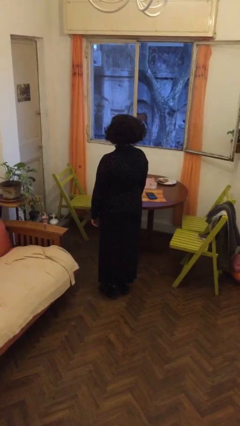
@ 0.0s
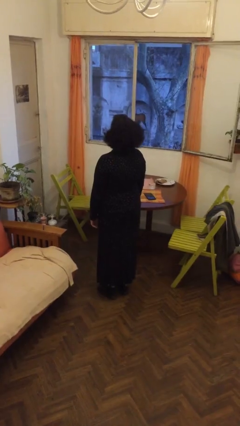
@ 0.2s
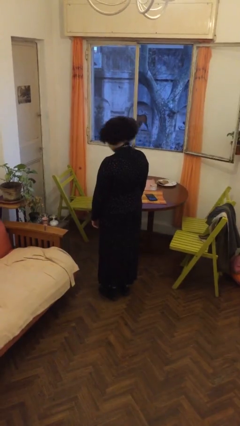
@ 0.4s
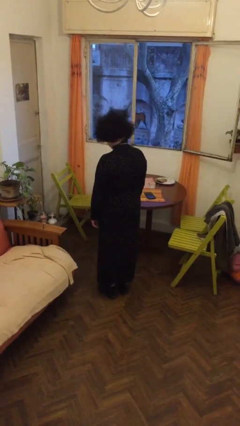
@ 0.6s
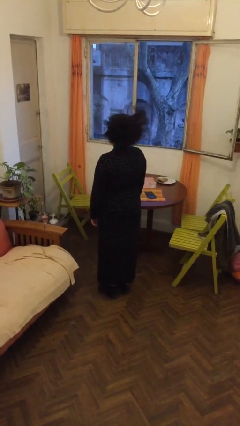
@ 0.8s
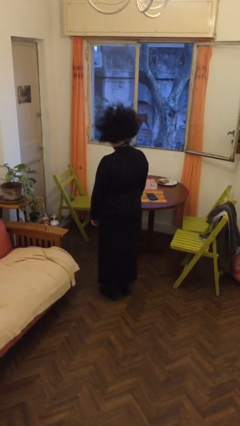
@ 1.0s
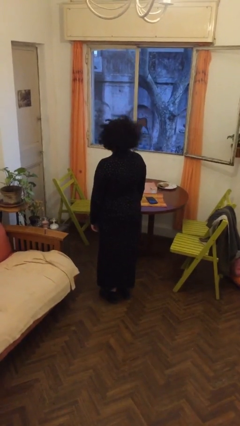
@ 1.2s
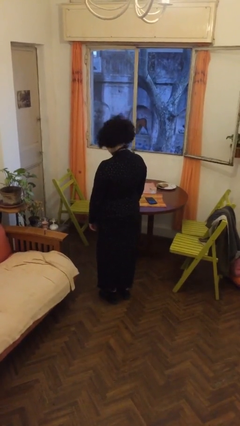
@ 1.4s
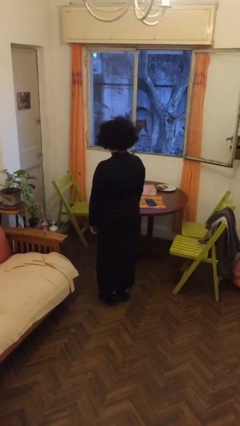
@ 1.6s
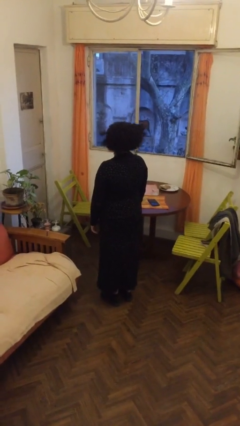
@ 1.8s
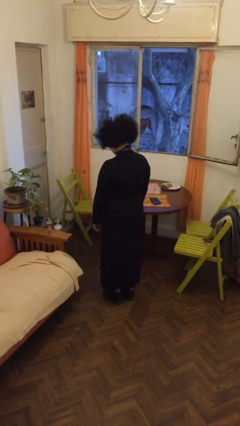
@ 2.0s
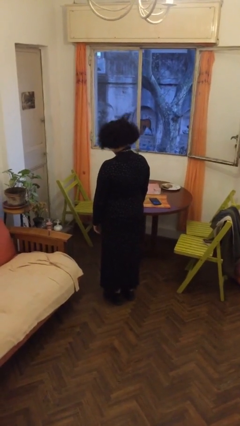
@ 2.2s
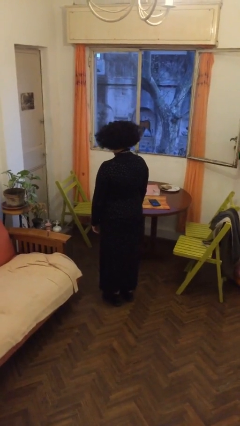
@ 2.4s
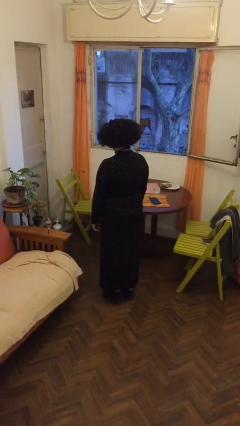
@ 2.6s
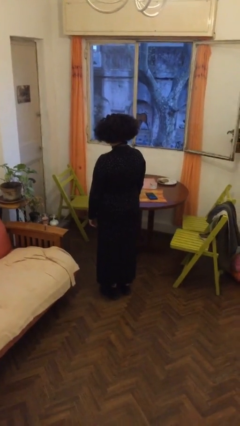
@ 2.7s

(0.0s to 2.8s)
person nods head

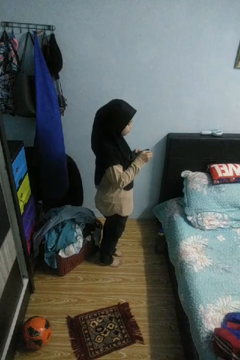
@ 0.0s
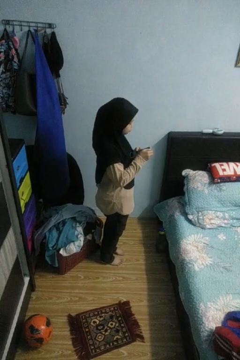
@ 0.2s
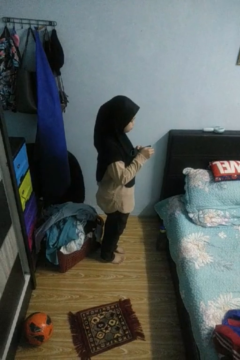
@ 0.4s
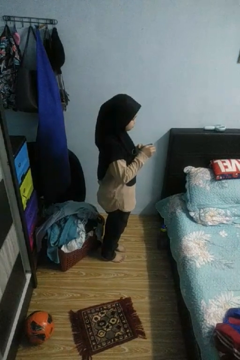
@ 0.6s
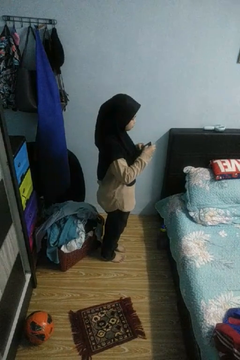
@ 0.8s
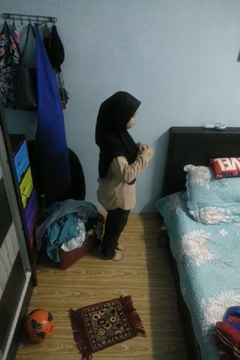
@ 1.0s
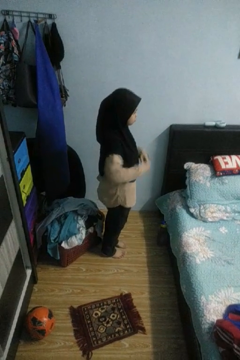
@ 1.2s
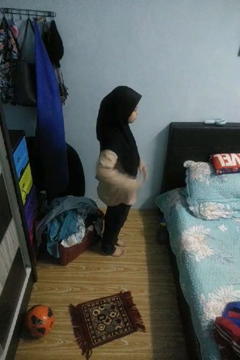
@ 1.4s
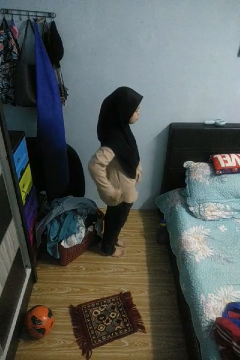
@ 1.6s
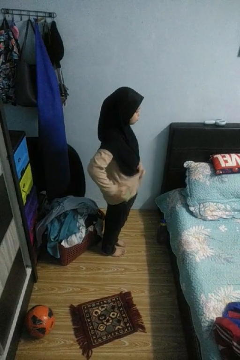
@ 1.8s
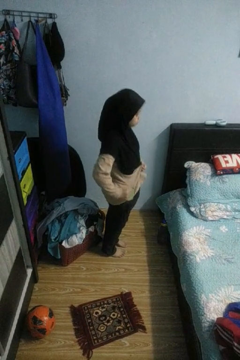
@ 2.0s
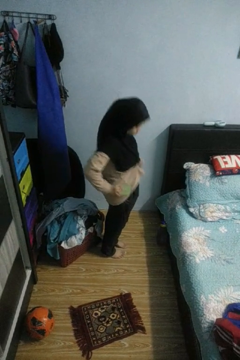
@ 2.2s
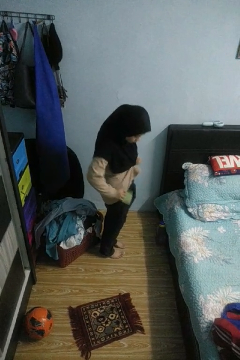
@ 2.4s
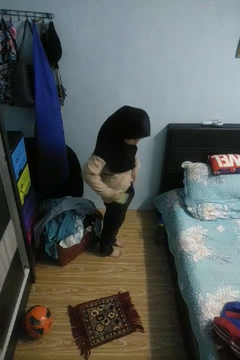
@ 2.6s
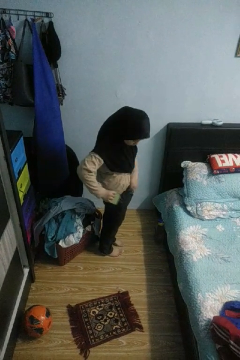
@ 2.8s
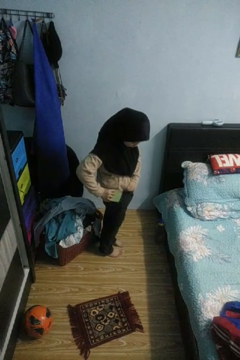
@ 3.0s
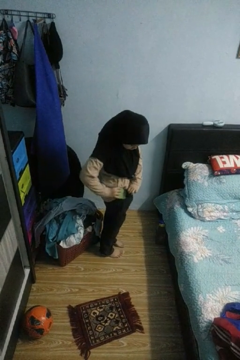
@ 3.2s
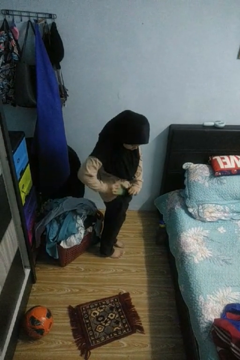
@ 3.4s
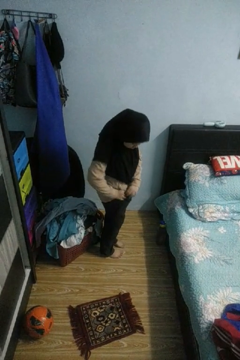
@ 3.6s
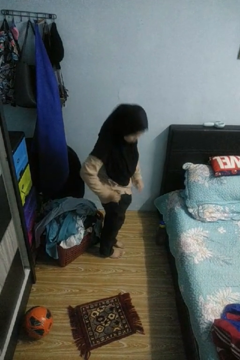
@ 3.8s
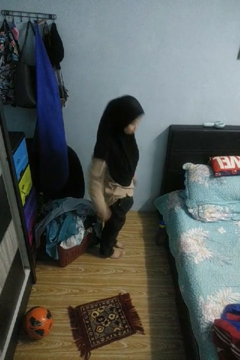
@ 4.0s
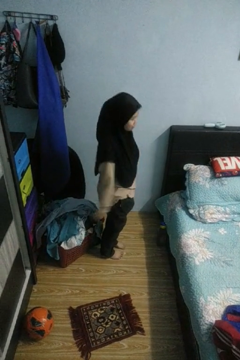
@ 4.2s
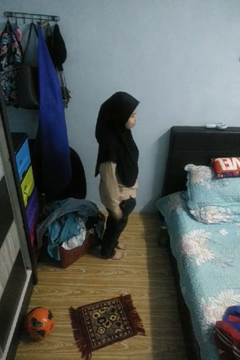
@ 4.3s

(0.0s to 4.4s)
person puts phone into pocket

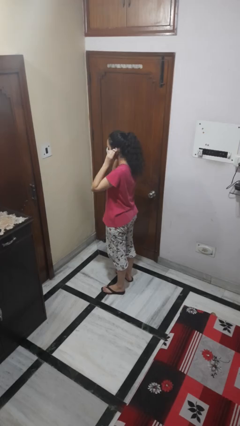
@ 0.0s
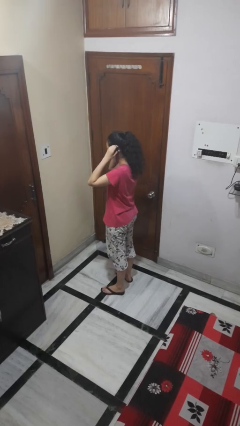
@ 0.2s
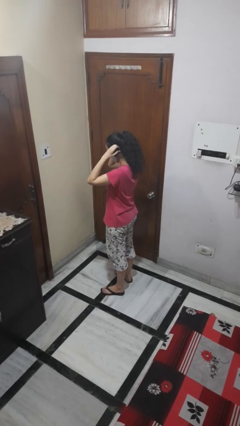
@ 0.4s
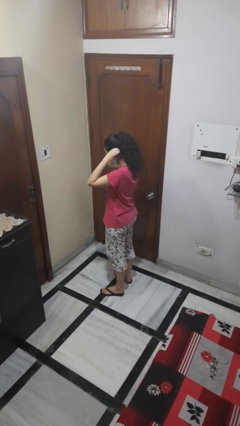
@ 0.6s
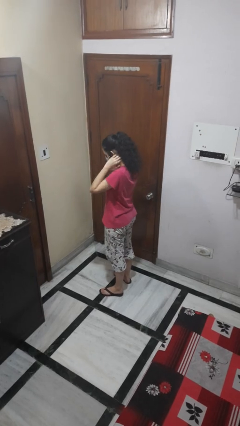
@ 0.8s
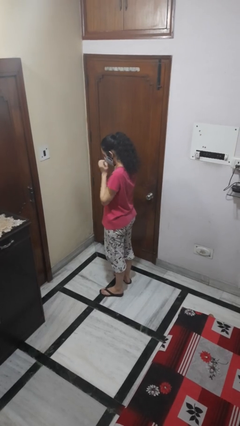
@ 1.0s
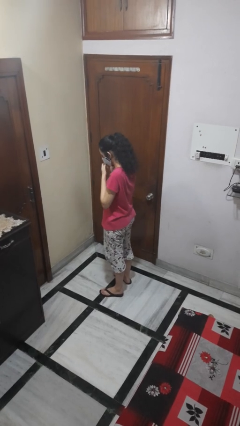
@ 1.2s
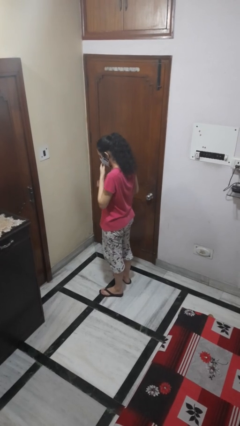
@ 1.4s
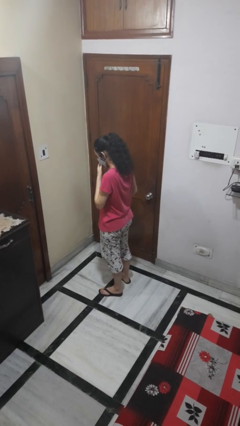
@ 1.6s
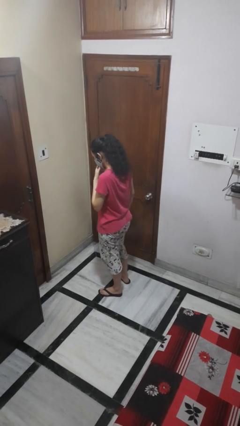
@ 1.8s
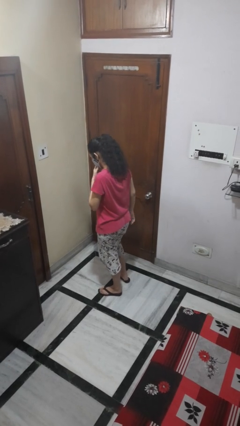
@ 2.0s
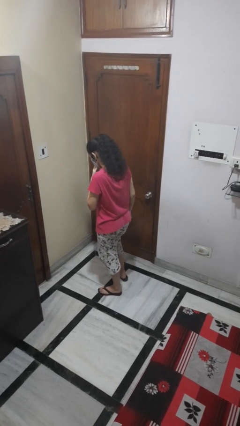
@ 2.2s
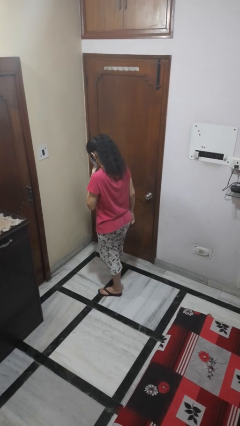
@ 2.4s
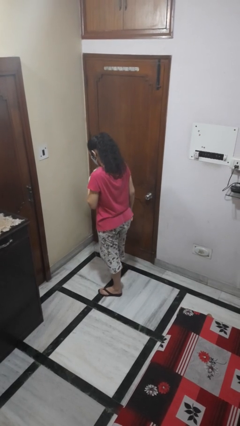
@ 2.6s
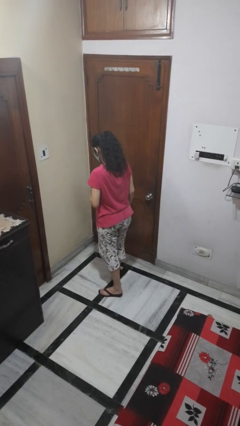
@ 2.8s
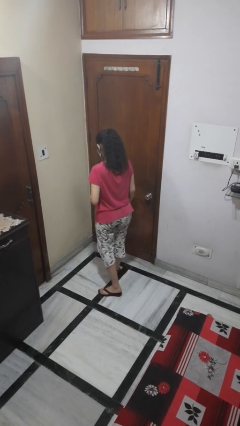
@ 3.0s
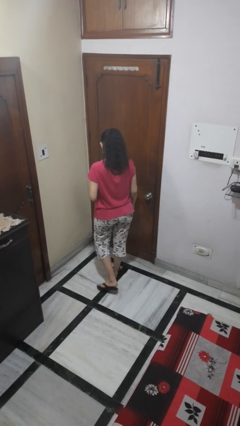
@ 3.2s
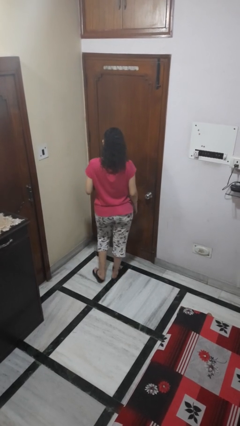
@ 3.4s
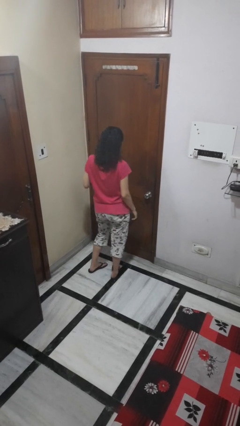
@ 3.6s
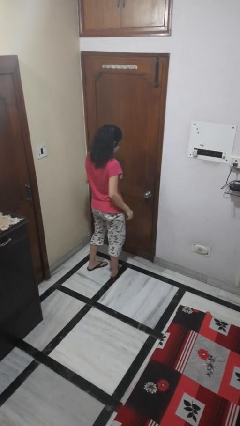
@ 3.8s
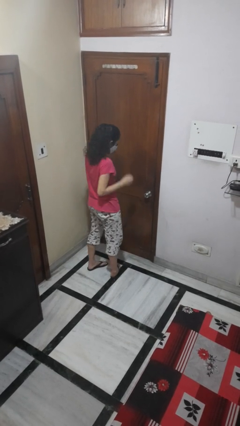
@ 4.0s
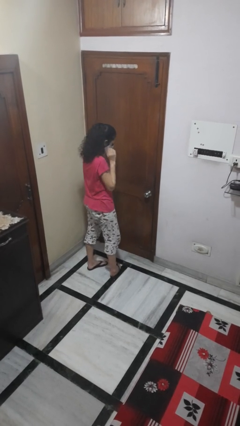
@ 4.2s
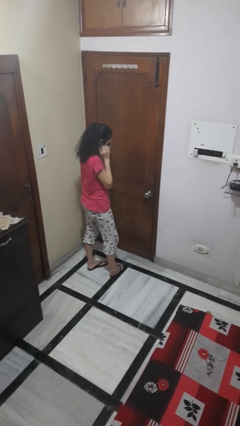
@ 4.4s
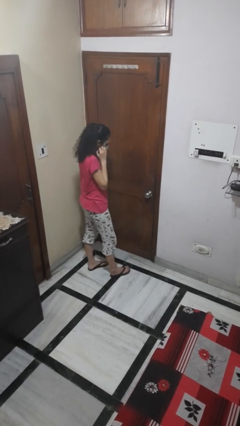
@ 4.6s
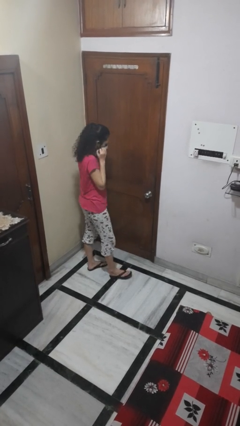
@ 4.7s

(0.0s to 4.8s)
person puts on facemask

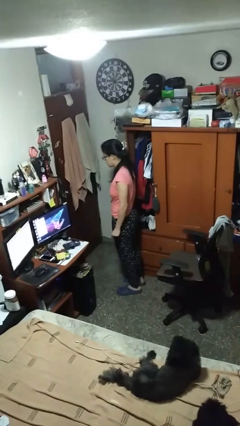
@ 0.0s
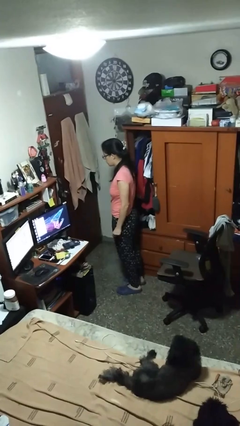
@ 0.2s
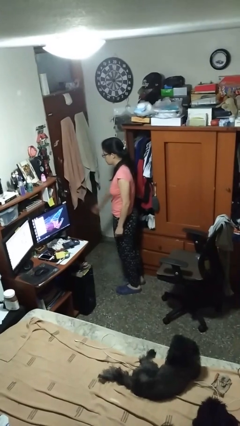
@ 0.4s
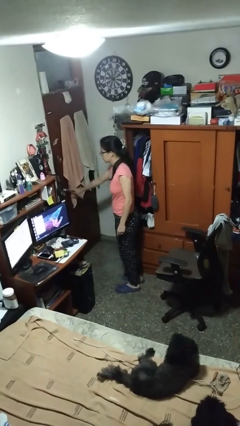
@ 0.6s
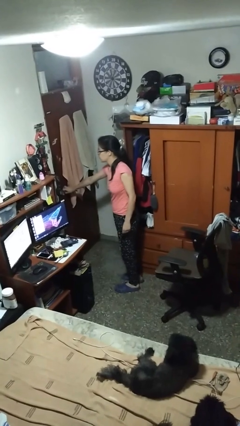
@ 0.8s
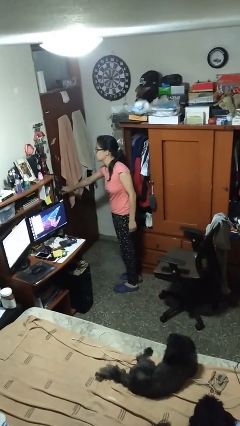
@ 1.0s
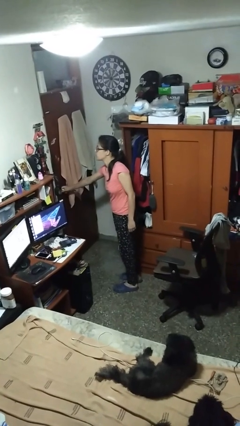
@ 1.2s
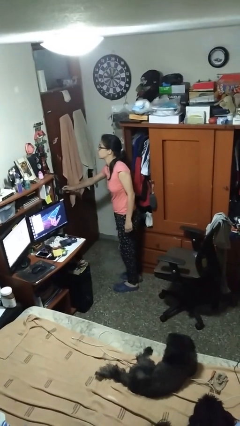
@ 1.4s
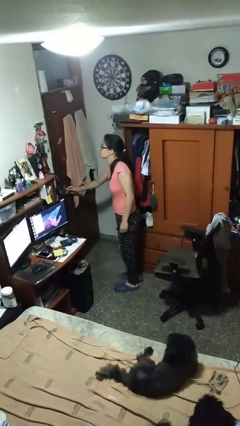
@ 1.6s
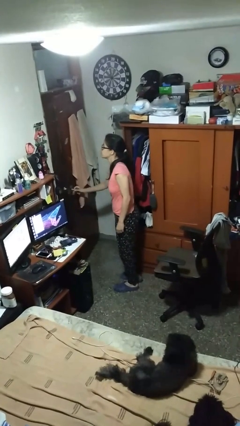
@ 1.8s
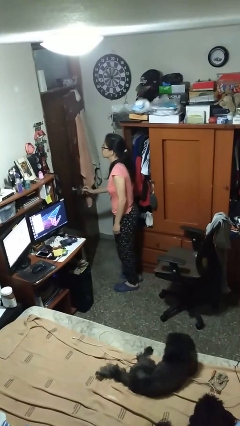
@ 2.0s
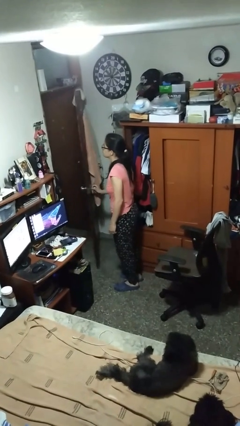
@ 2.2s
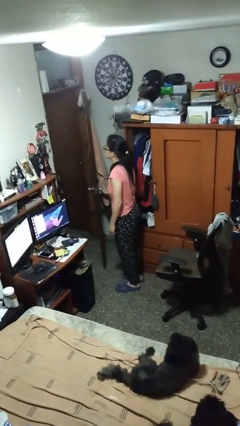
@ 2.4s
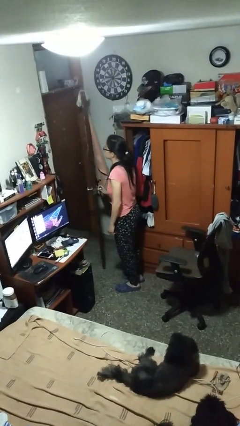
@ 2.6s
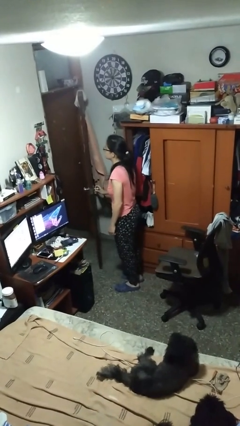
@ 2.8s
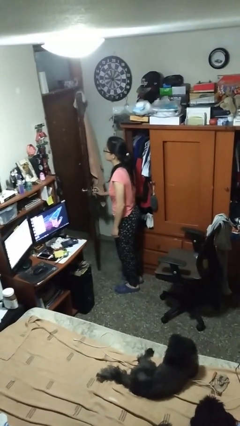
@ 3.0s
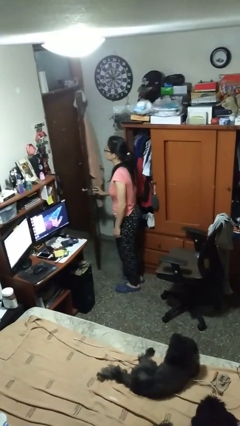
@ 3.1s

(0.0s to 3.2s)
person opens facility door

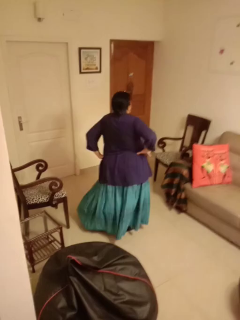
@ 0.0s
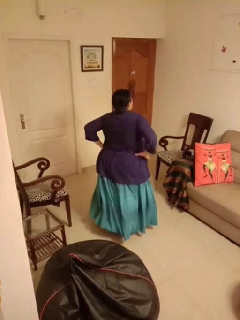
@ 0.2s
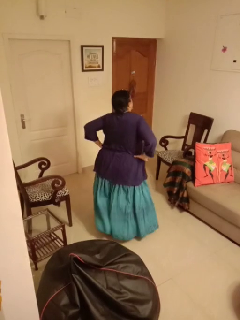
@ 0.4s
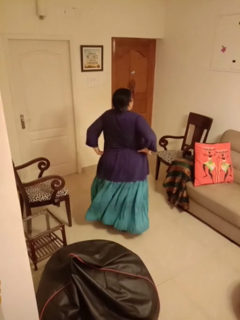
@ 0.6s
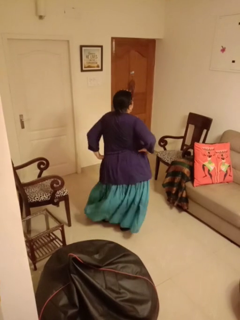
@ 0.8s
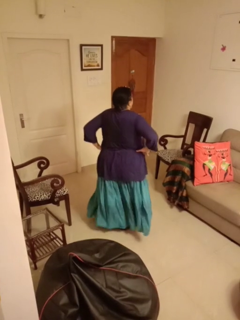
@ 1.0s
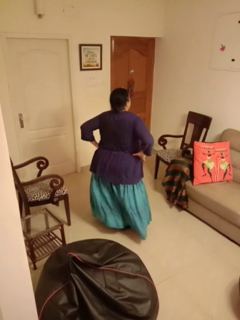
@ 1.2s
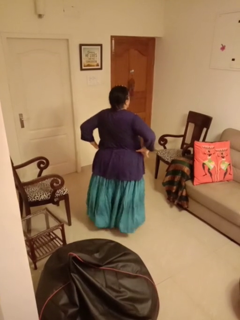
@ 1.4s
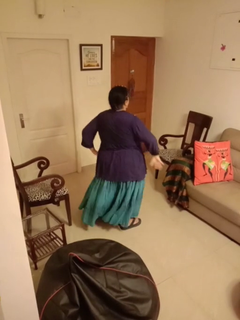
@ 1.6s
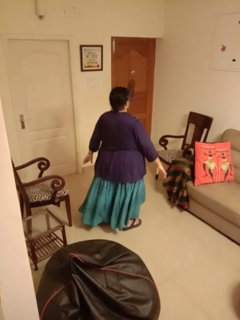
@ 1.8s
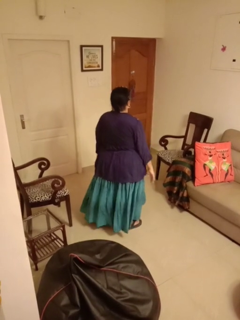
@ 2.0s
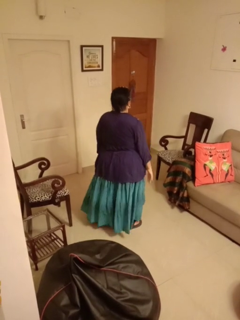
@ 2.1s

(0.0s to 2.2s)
person wiggles hips

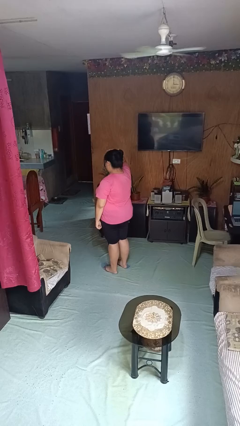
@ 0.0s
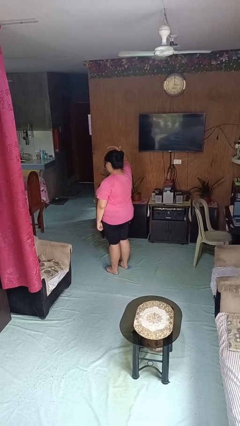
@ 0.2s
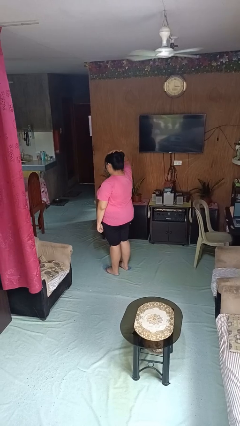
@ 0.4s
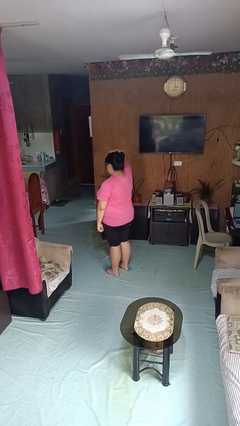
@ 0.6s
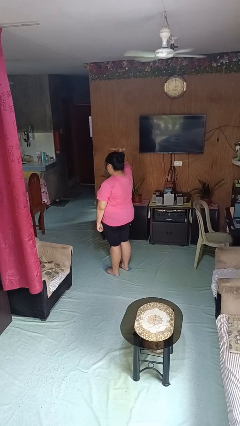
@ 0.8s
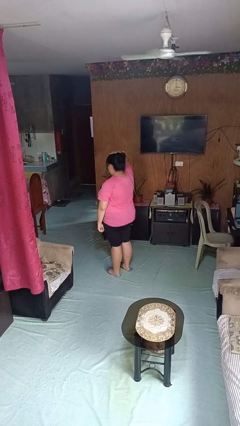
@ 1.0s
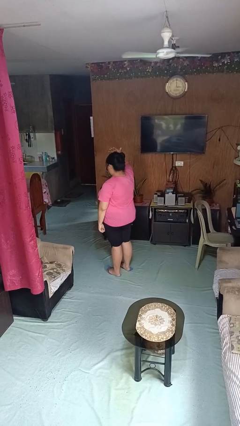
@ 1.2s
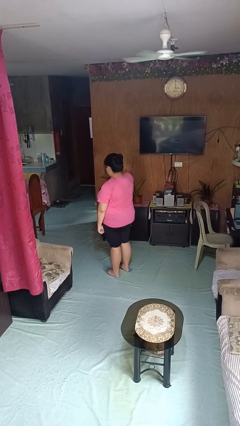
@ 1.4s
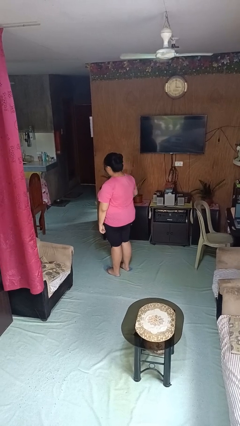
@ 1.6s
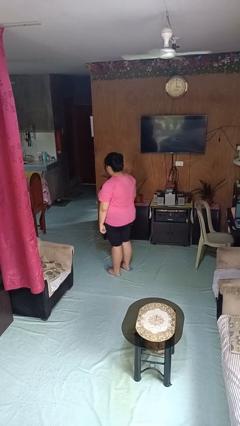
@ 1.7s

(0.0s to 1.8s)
person pats head
